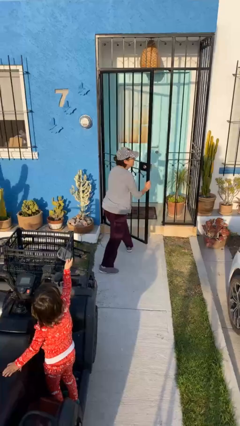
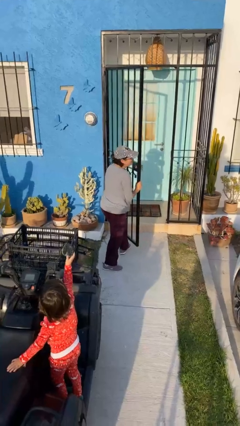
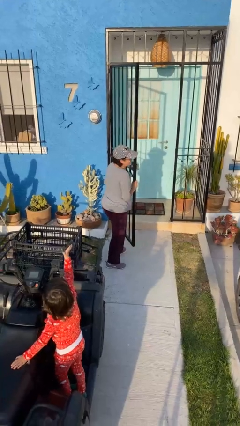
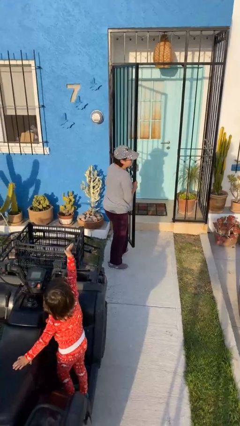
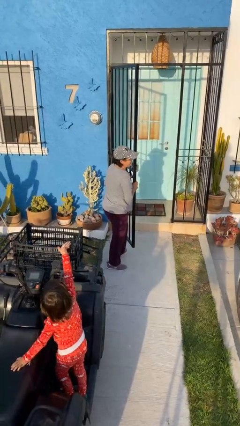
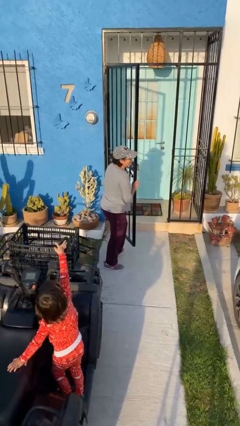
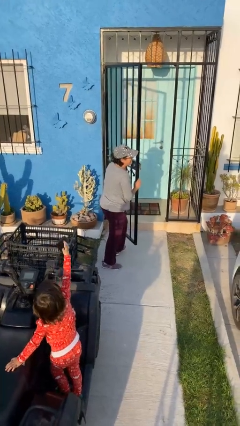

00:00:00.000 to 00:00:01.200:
person opens facility door

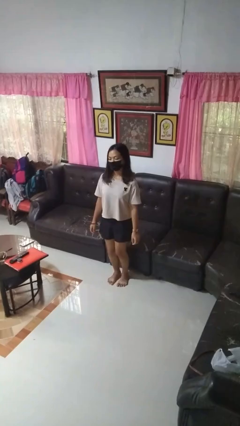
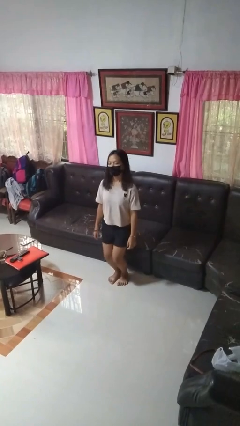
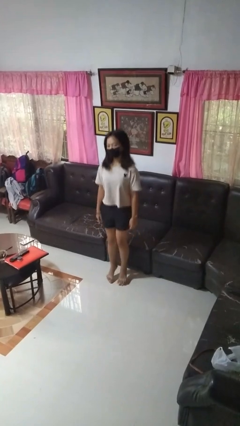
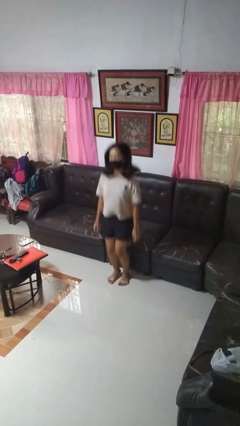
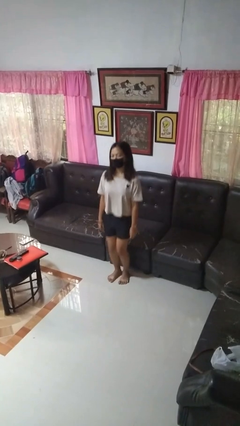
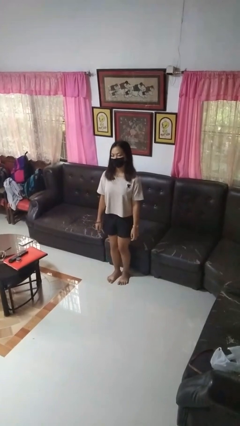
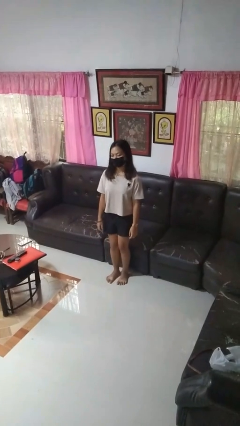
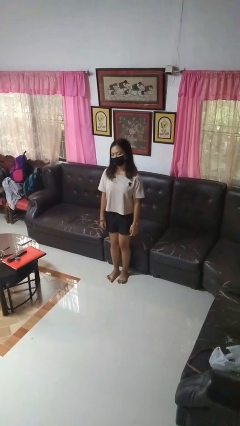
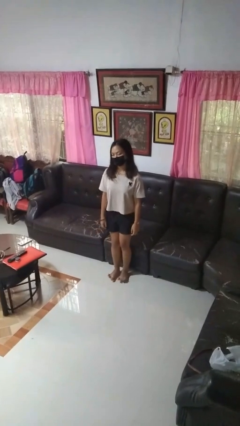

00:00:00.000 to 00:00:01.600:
person jumps

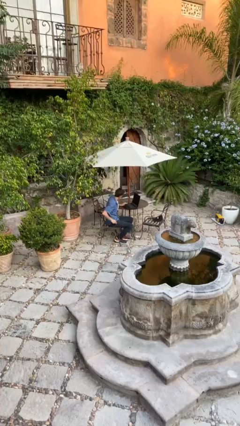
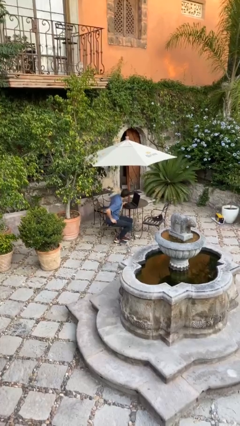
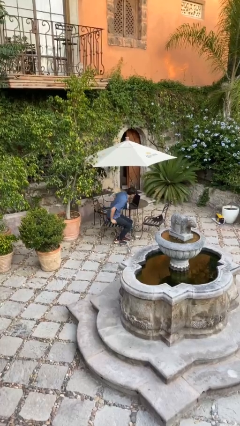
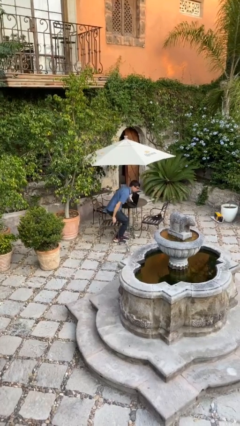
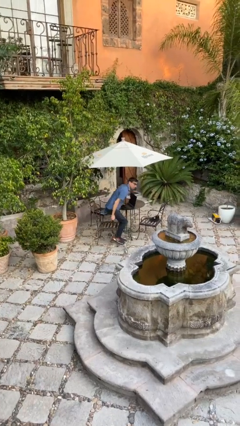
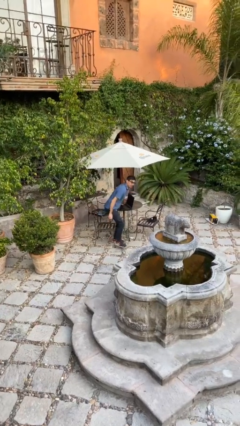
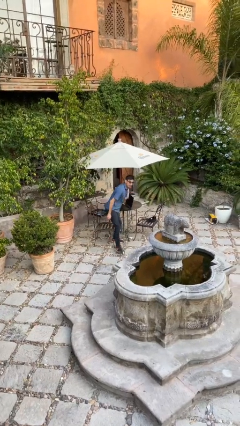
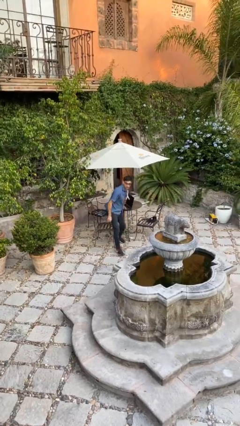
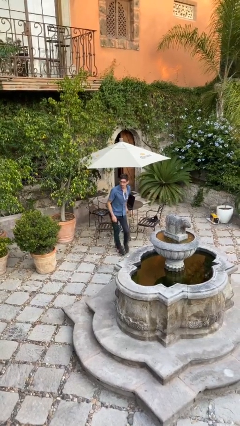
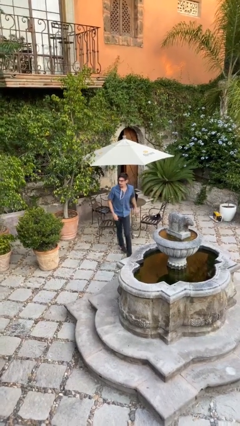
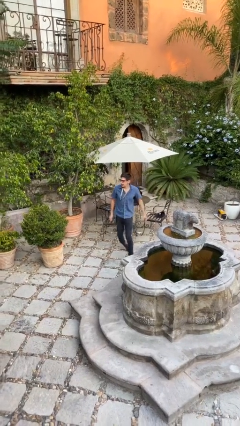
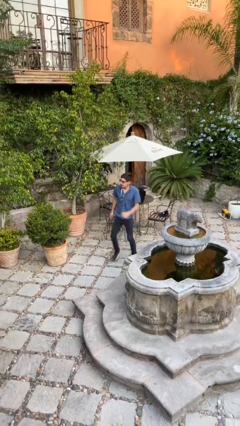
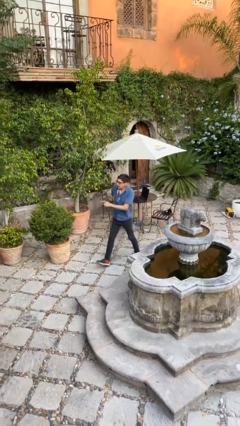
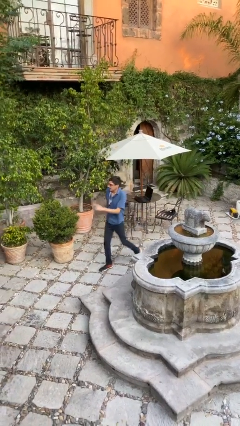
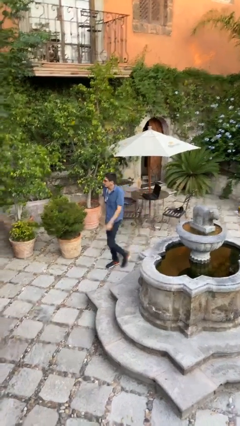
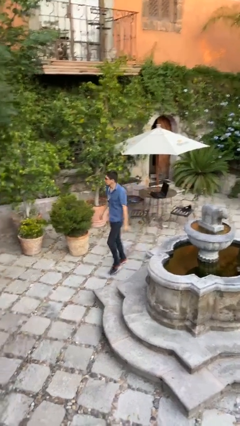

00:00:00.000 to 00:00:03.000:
person stands up

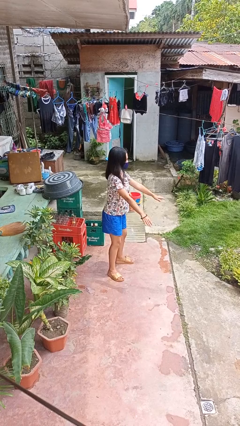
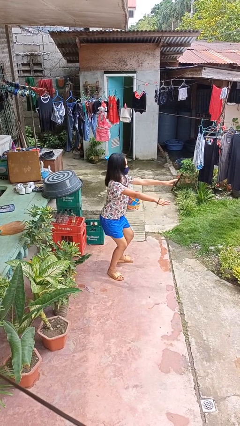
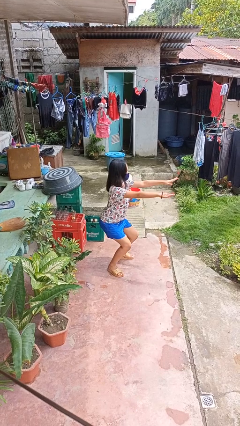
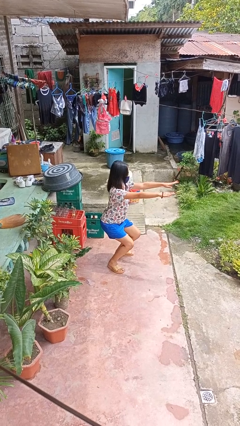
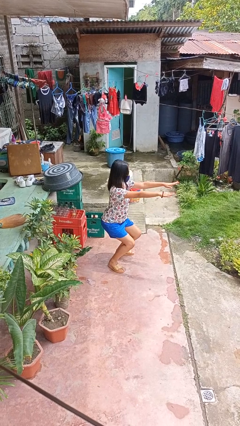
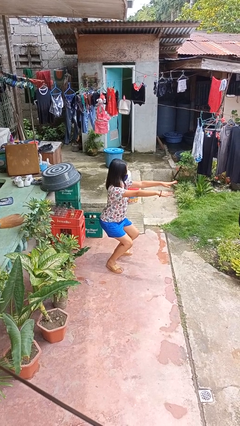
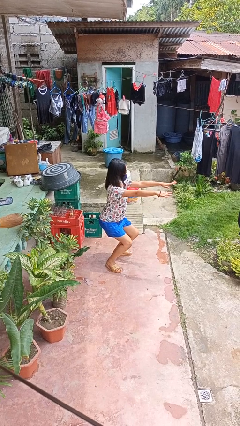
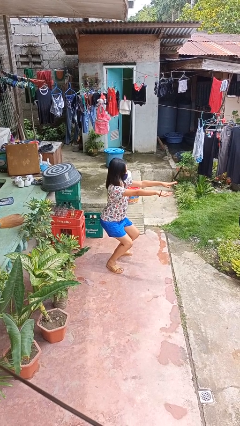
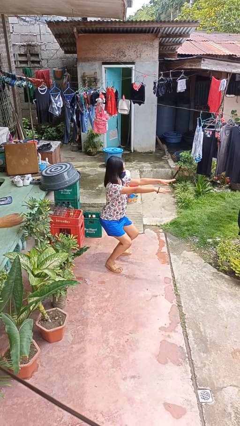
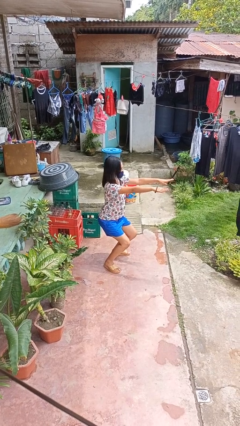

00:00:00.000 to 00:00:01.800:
person squats

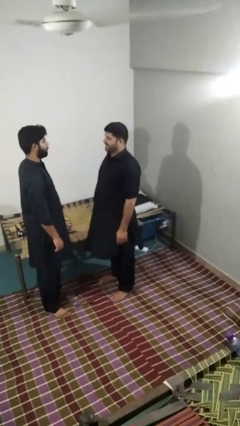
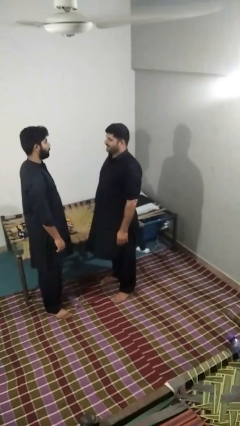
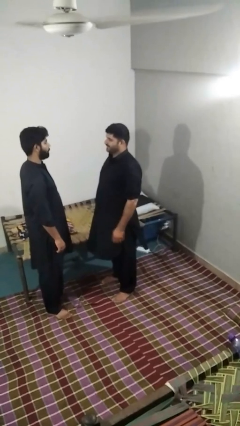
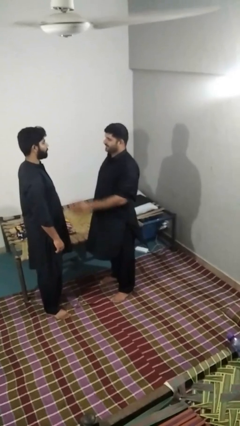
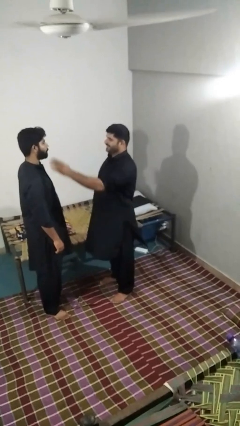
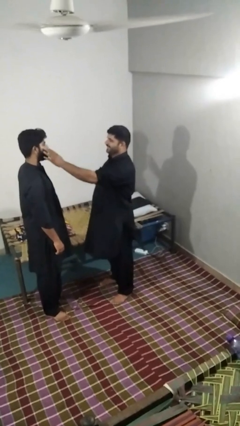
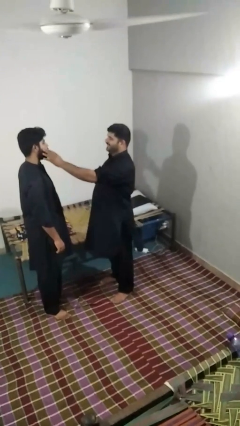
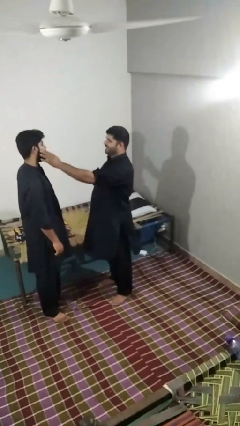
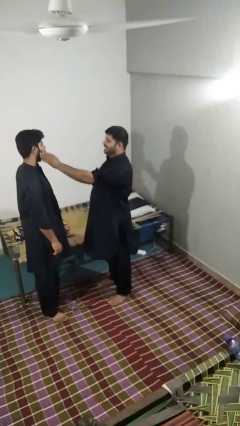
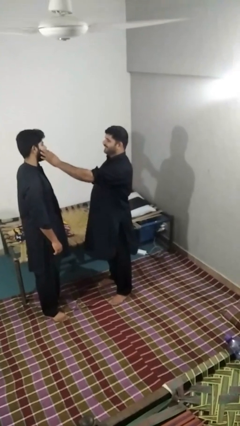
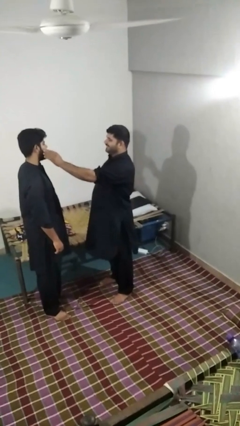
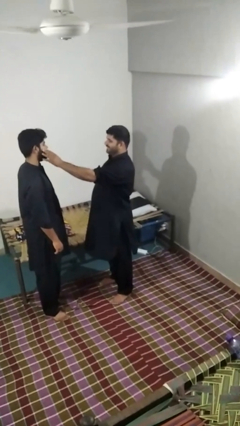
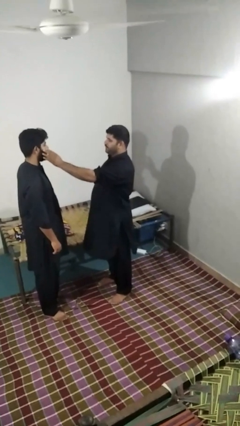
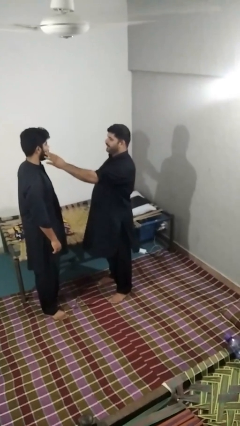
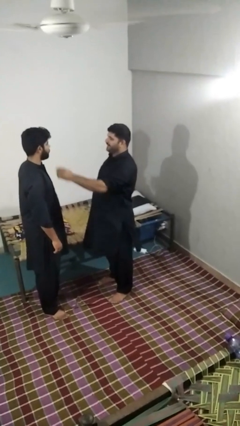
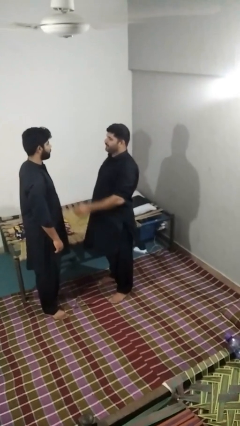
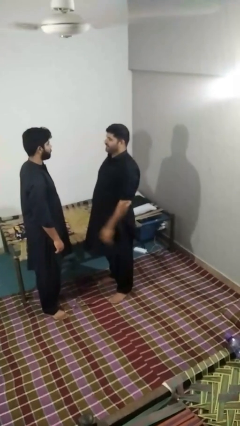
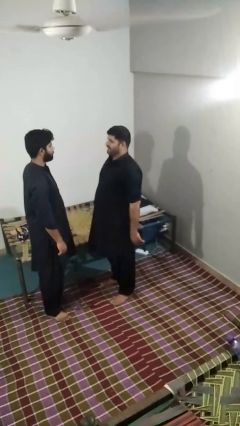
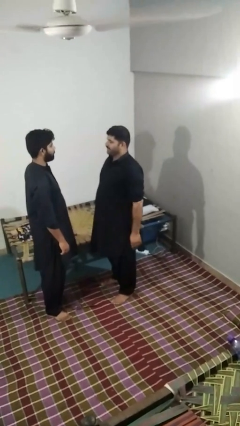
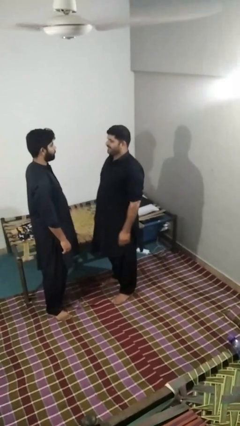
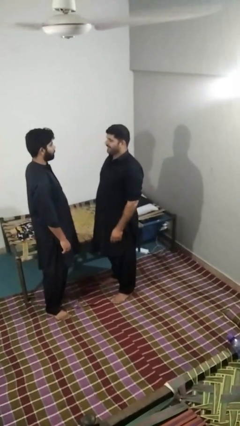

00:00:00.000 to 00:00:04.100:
person touches face of person

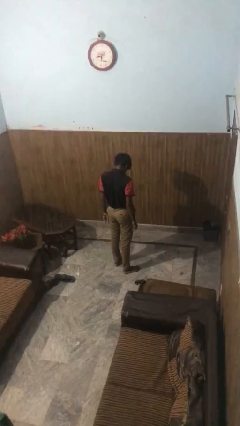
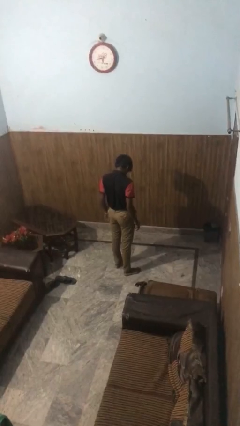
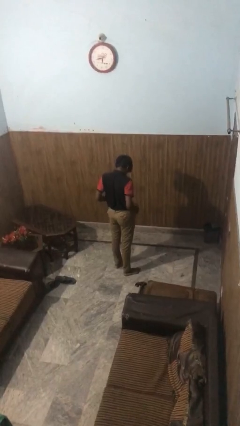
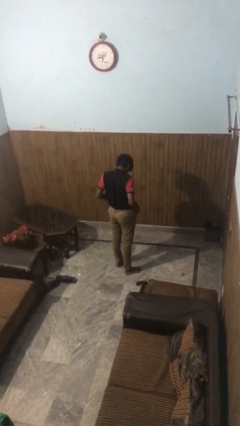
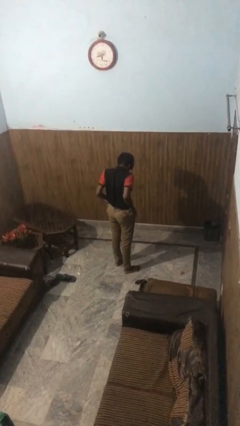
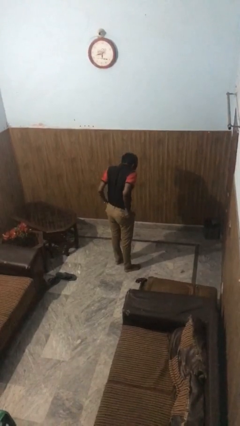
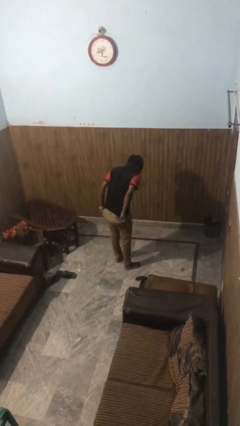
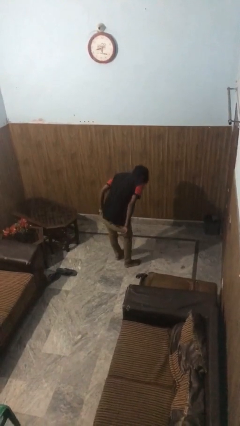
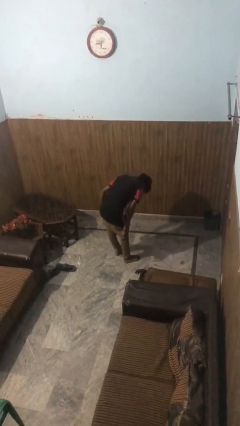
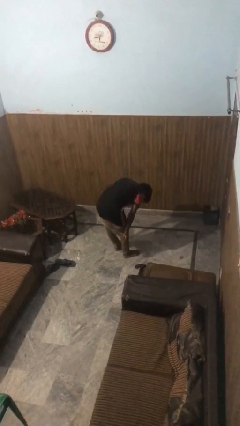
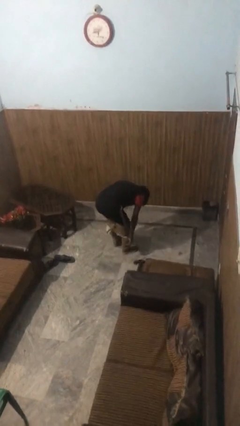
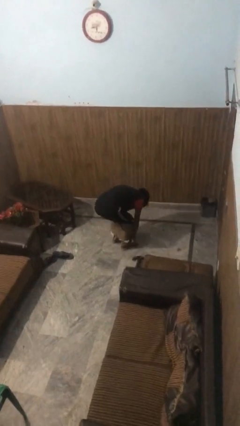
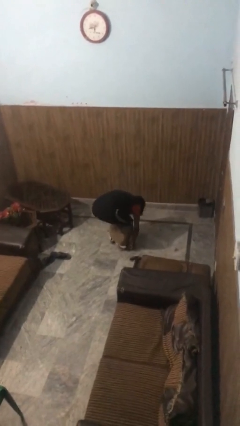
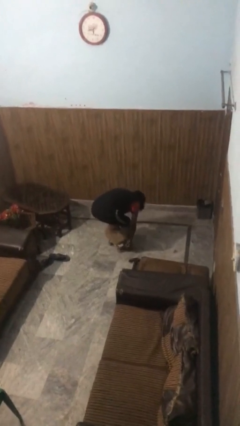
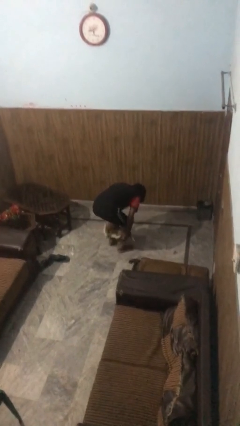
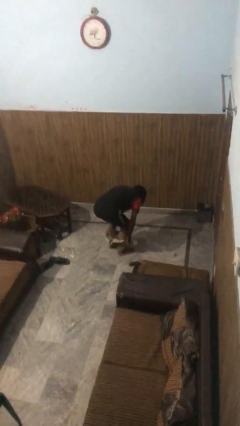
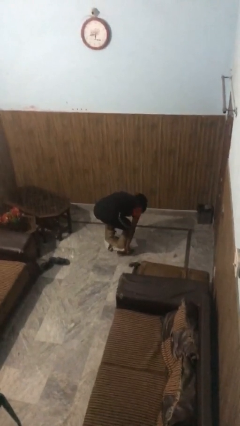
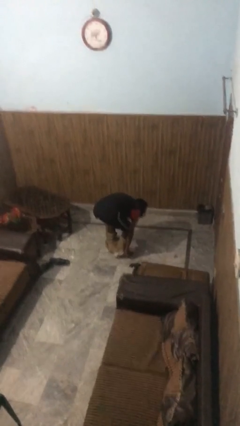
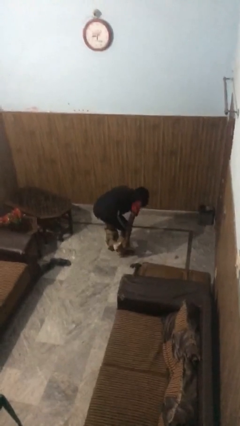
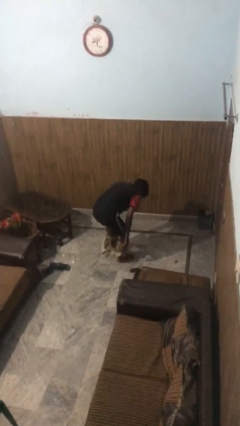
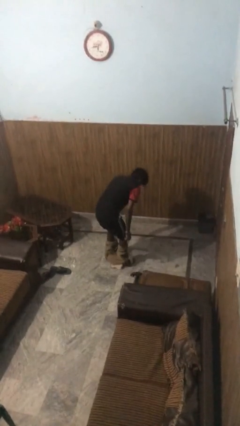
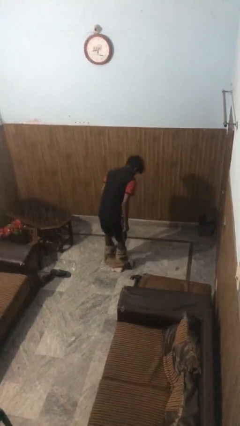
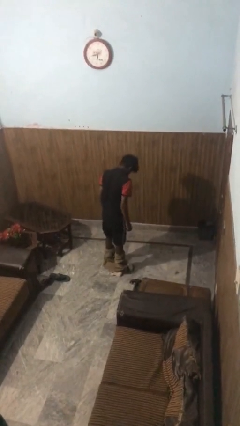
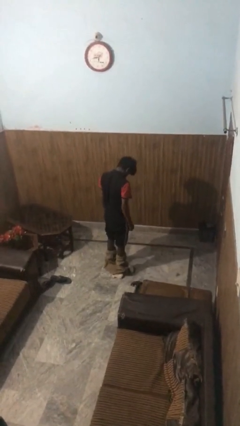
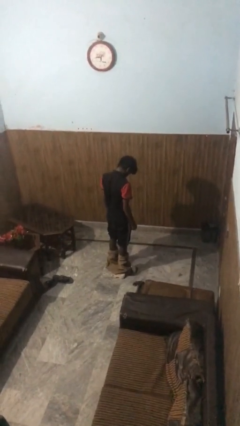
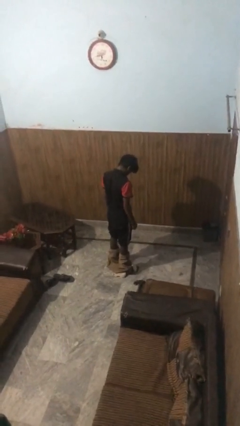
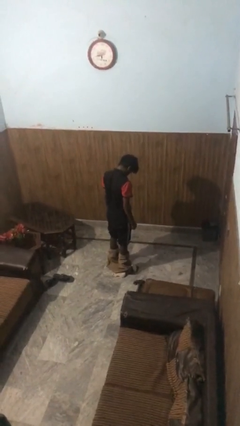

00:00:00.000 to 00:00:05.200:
person takes off pants

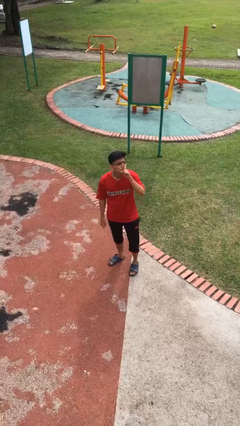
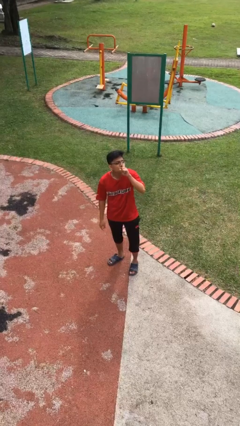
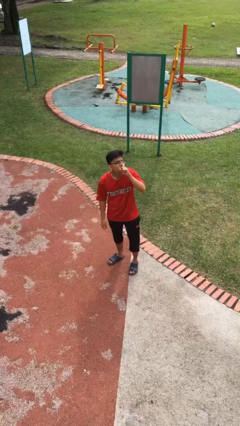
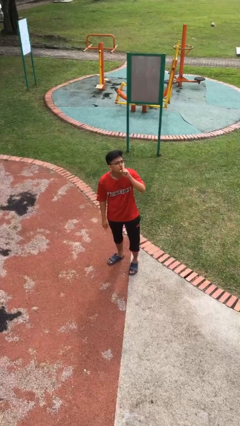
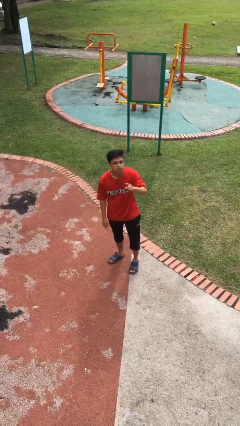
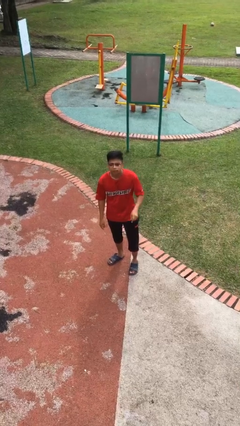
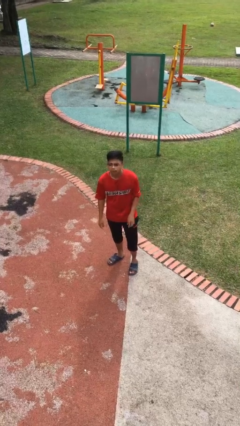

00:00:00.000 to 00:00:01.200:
person gestures be quiet
